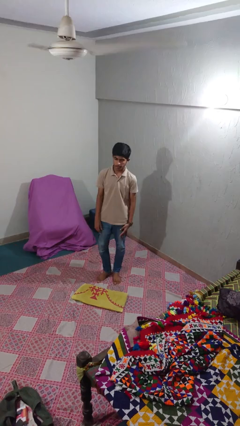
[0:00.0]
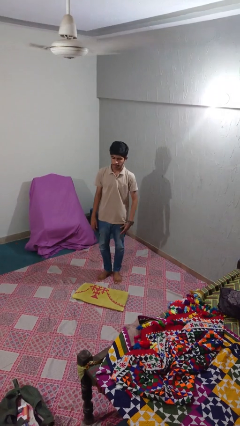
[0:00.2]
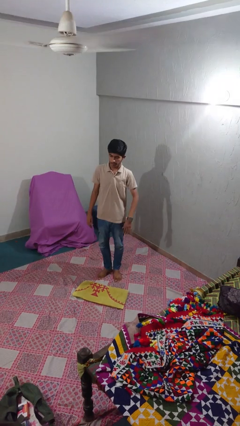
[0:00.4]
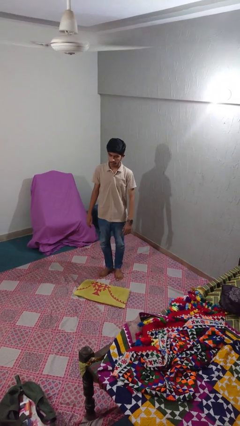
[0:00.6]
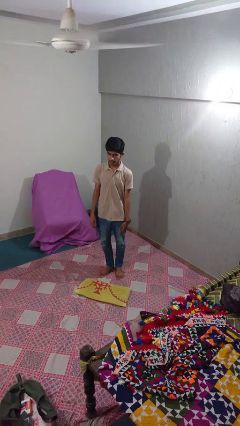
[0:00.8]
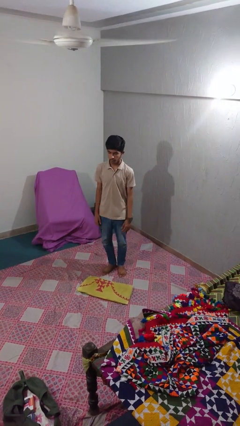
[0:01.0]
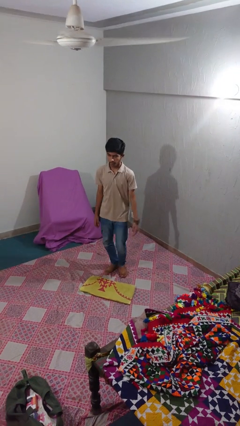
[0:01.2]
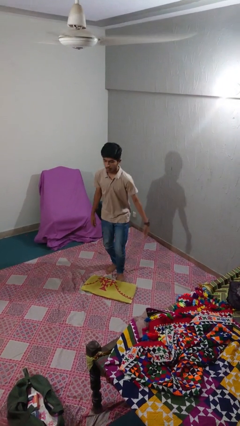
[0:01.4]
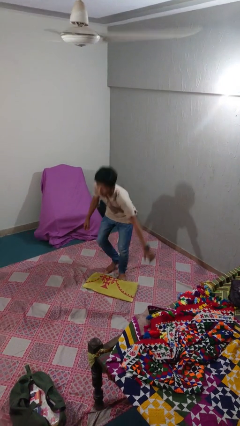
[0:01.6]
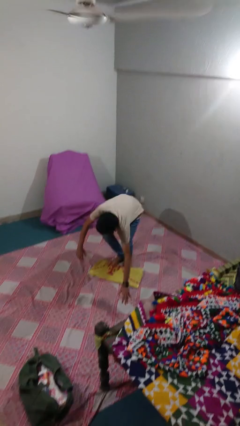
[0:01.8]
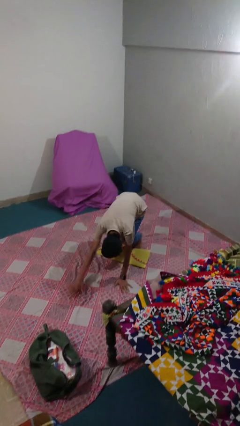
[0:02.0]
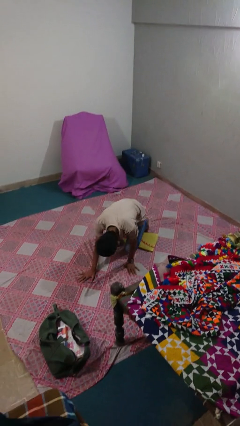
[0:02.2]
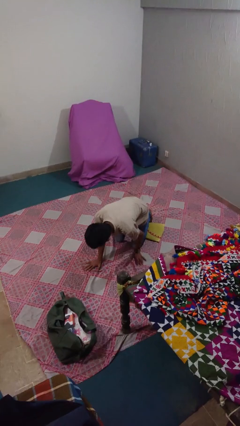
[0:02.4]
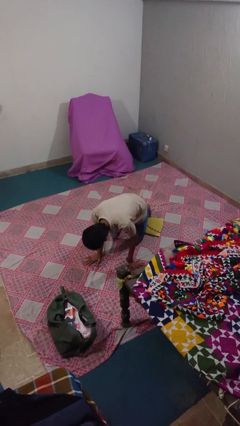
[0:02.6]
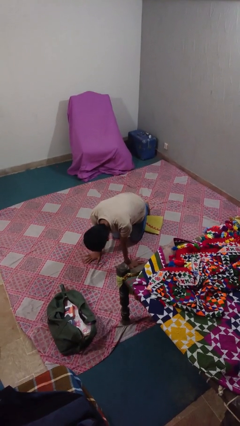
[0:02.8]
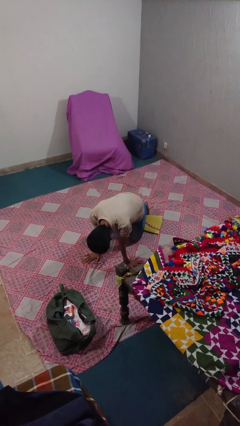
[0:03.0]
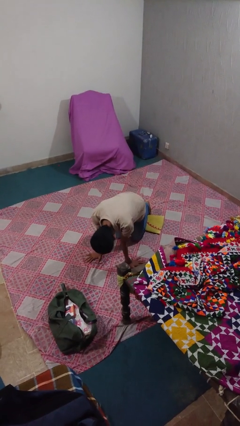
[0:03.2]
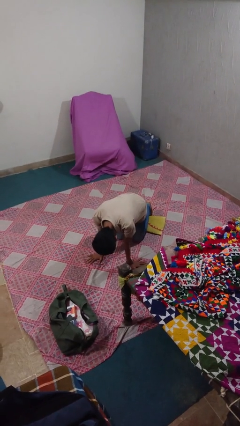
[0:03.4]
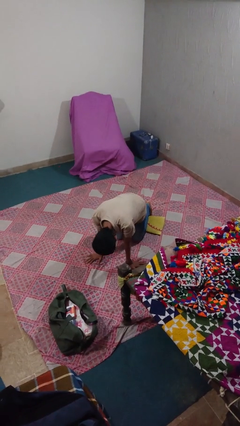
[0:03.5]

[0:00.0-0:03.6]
person trips on object on floor

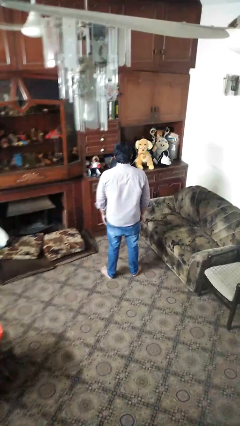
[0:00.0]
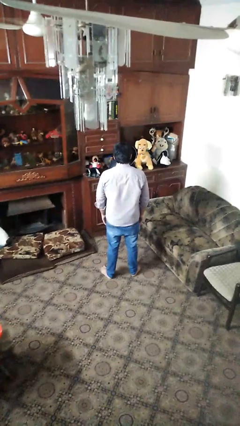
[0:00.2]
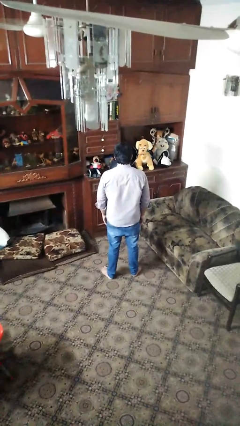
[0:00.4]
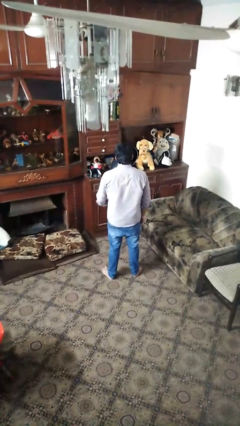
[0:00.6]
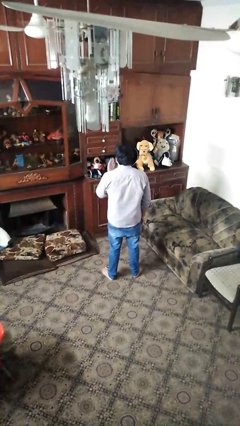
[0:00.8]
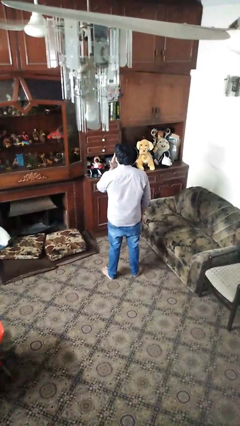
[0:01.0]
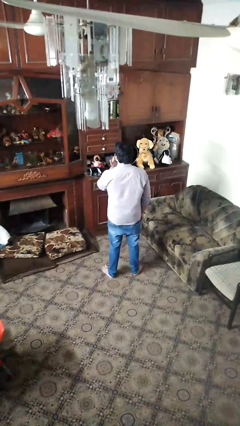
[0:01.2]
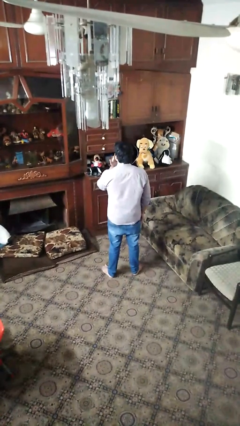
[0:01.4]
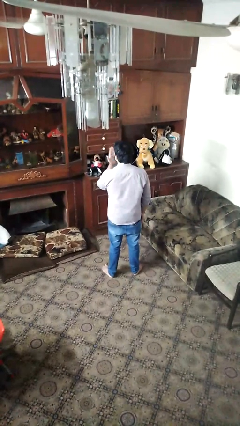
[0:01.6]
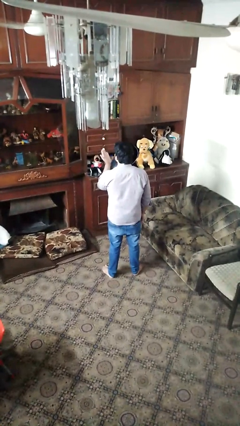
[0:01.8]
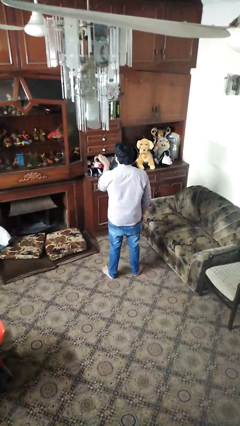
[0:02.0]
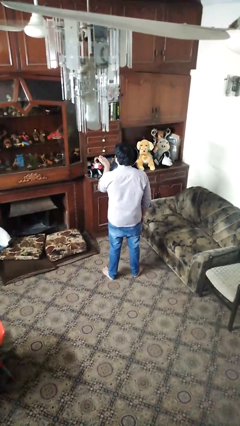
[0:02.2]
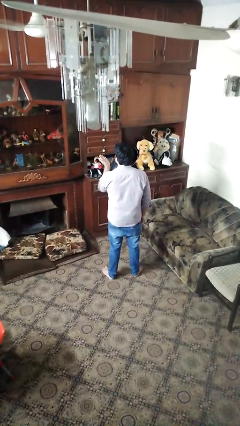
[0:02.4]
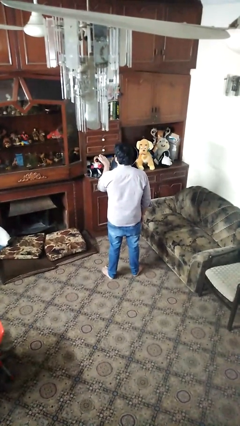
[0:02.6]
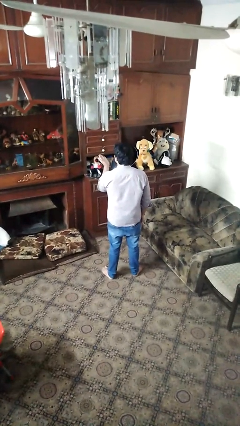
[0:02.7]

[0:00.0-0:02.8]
person gestures blow kiss

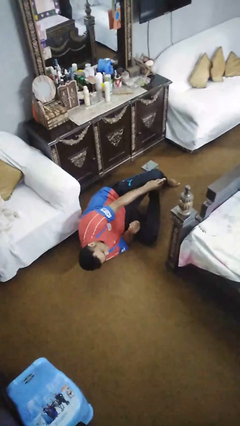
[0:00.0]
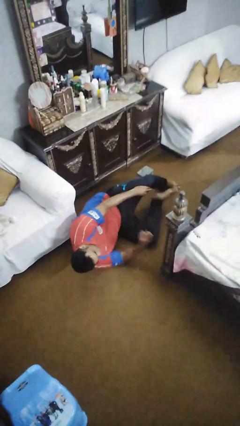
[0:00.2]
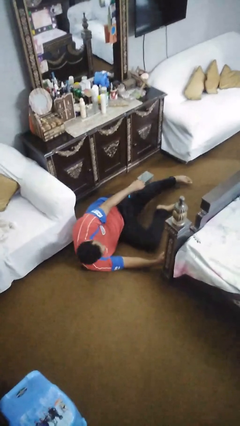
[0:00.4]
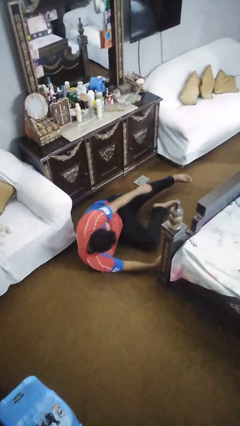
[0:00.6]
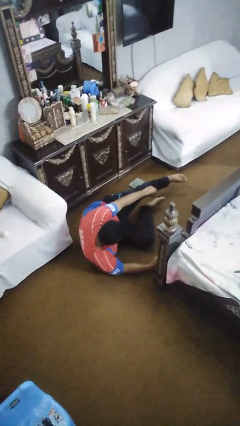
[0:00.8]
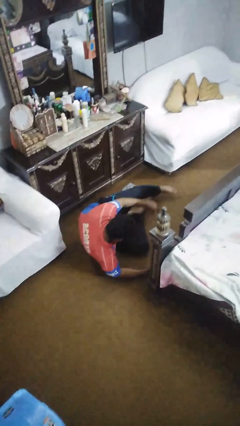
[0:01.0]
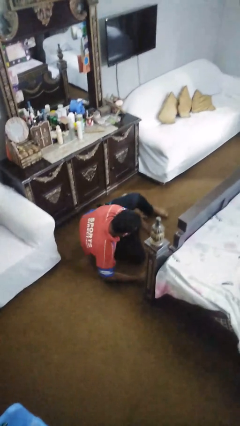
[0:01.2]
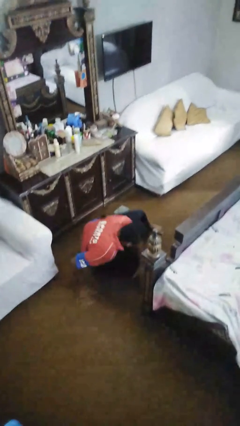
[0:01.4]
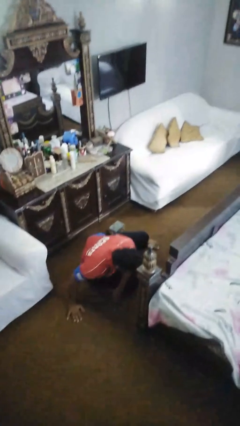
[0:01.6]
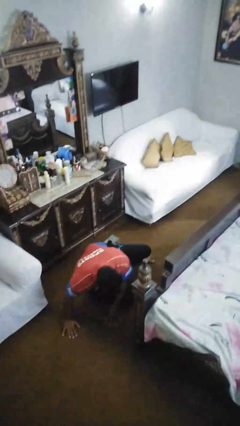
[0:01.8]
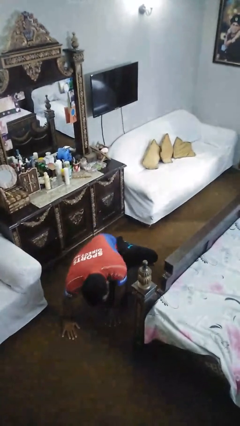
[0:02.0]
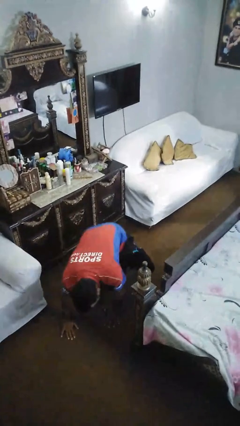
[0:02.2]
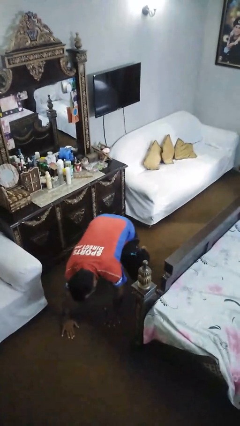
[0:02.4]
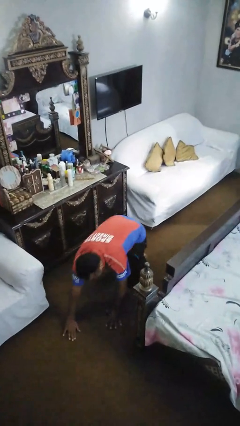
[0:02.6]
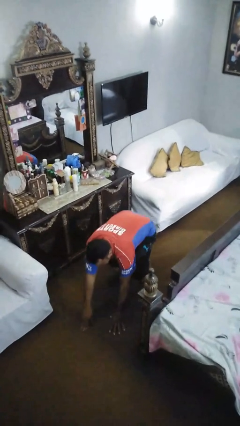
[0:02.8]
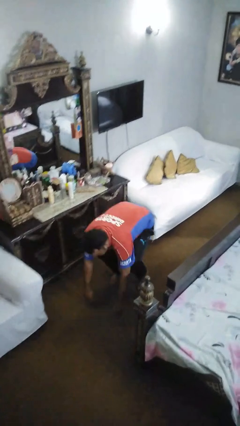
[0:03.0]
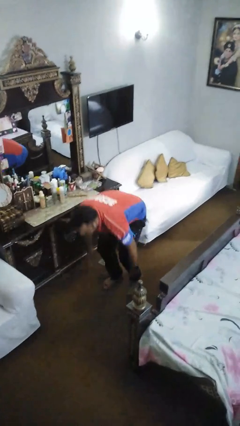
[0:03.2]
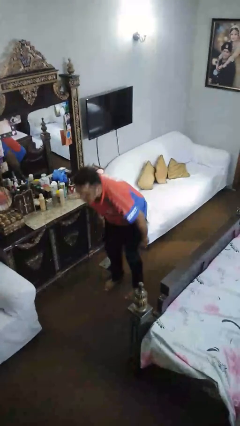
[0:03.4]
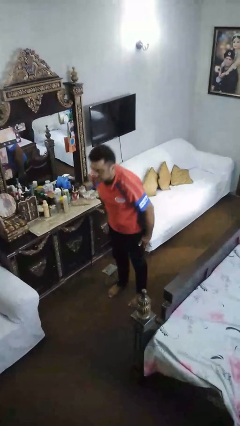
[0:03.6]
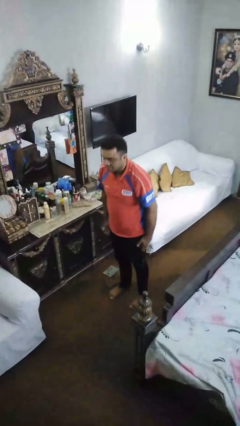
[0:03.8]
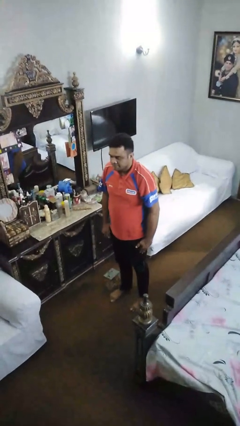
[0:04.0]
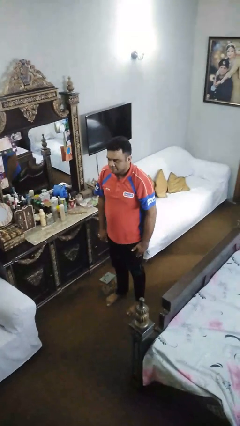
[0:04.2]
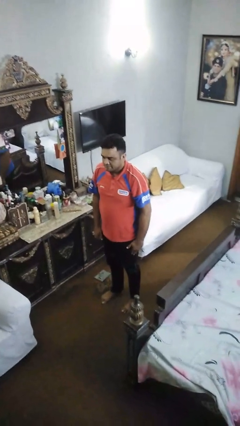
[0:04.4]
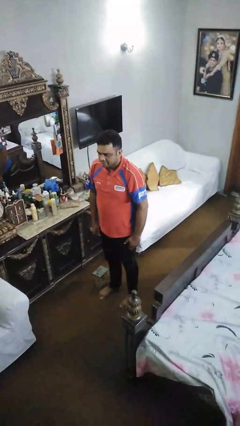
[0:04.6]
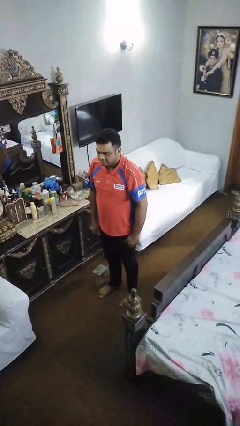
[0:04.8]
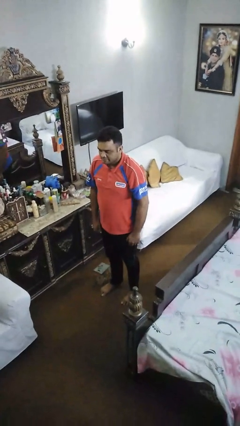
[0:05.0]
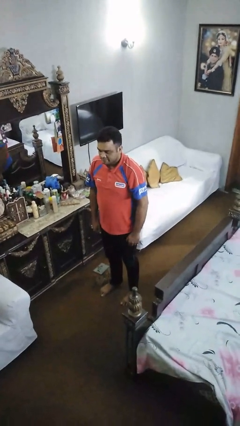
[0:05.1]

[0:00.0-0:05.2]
person stands up from floor

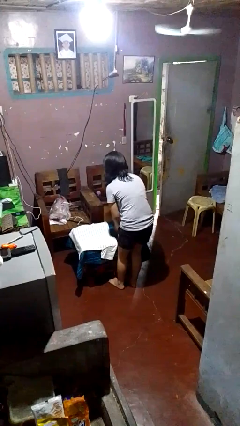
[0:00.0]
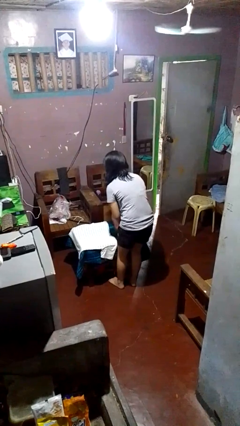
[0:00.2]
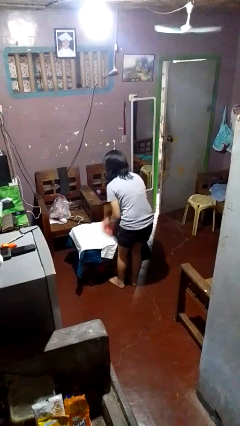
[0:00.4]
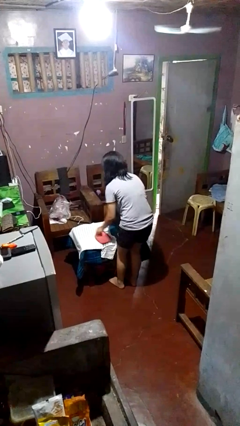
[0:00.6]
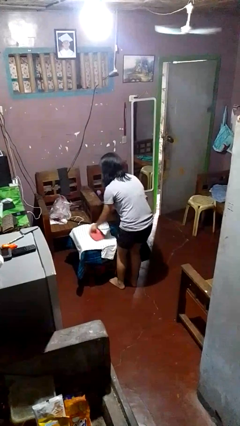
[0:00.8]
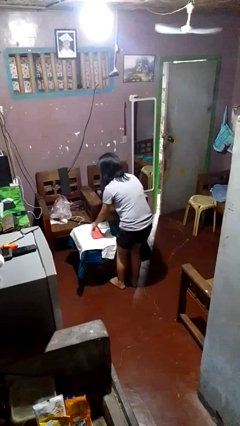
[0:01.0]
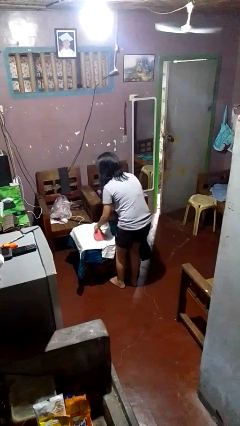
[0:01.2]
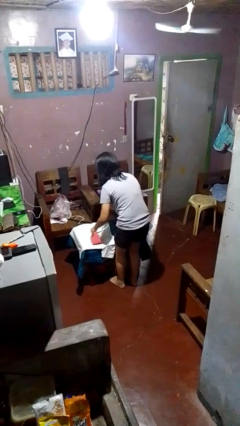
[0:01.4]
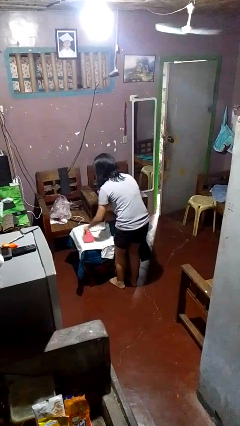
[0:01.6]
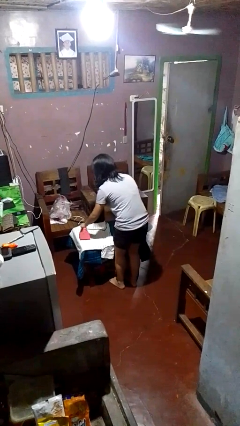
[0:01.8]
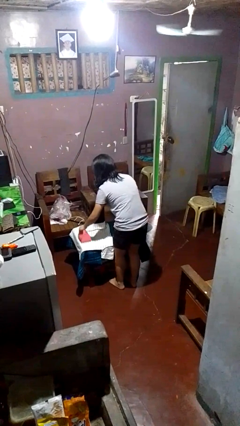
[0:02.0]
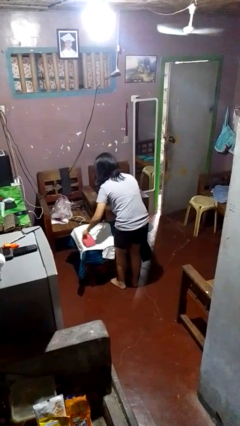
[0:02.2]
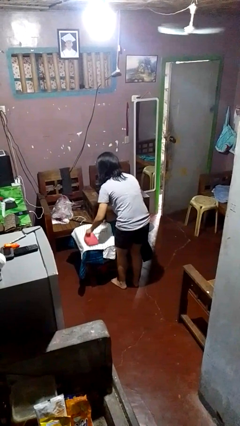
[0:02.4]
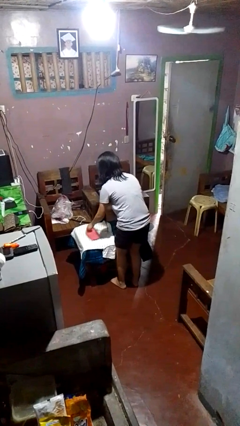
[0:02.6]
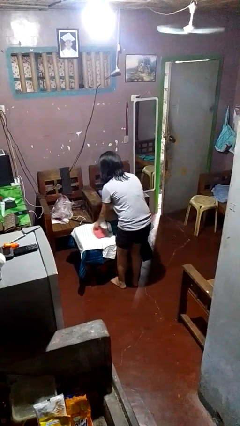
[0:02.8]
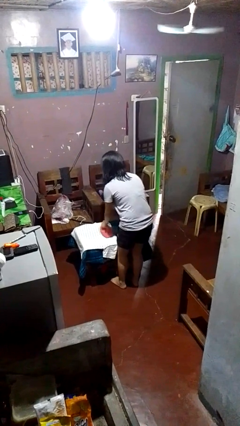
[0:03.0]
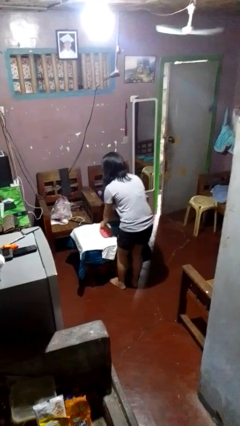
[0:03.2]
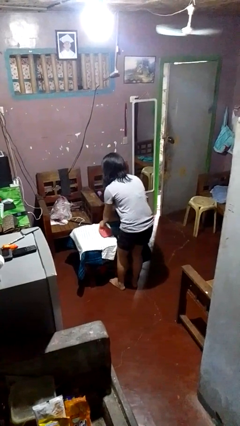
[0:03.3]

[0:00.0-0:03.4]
person irons clothes

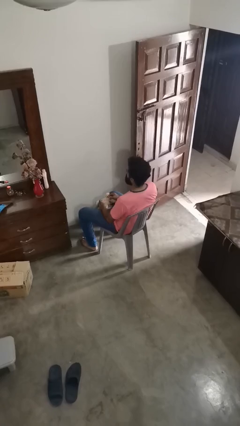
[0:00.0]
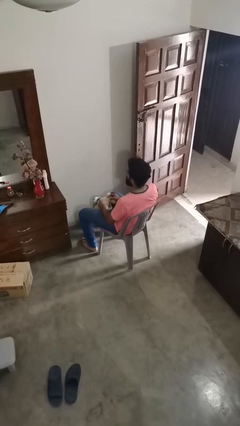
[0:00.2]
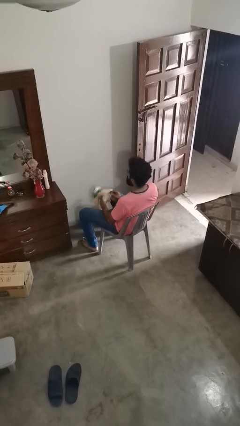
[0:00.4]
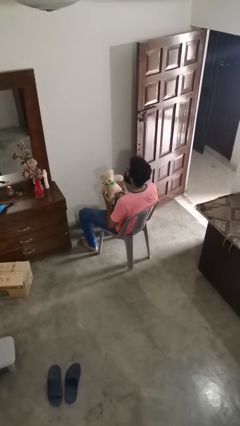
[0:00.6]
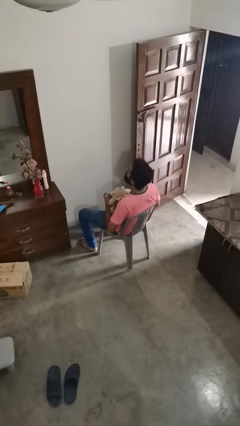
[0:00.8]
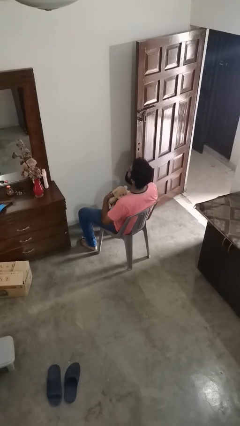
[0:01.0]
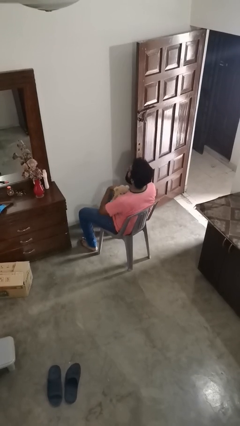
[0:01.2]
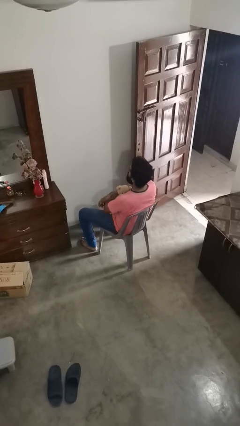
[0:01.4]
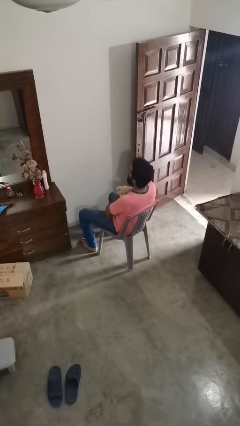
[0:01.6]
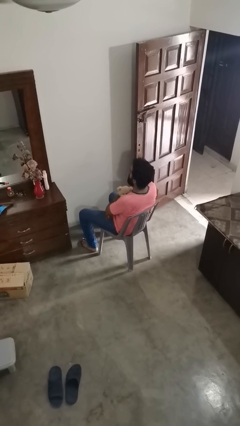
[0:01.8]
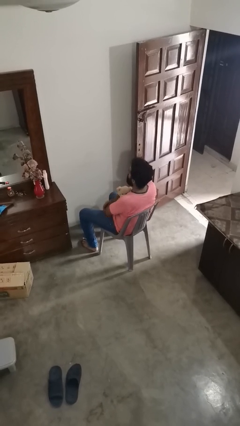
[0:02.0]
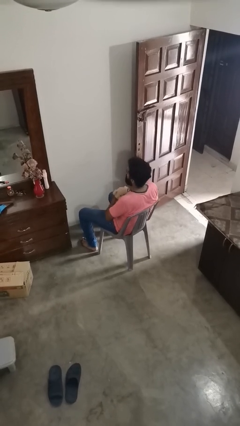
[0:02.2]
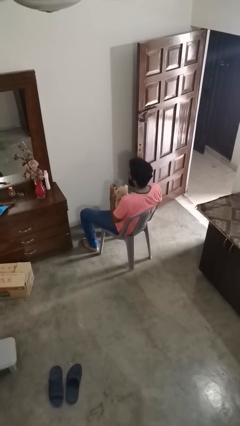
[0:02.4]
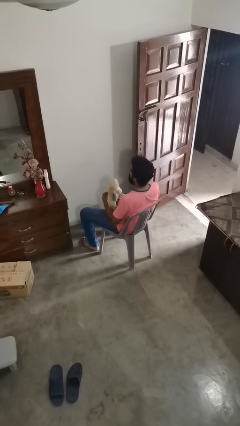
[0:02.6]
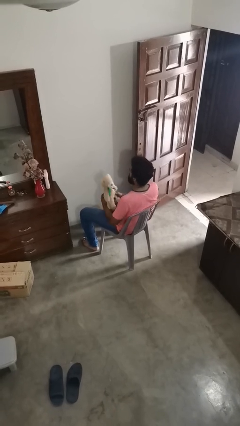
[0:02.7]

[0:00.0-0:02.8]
person hugs stuffed animal
